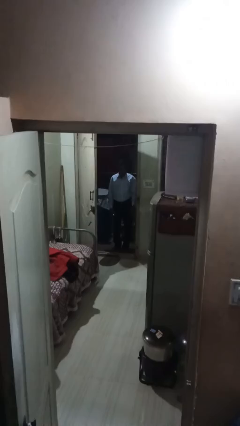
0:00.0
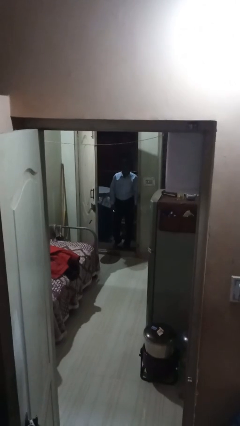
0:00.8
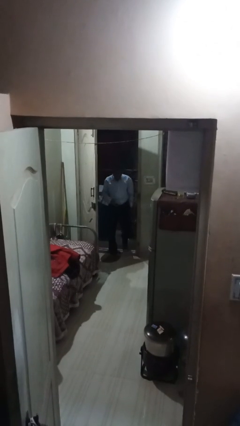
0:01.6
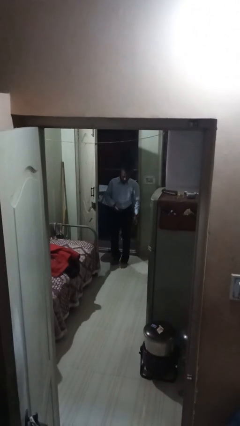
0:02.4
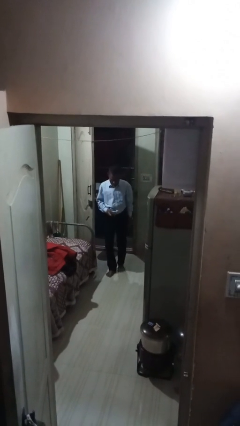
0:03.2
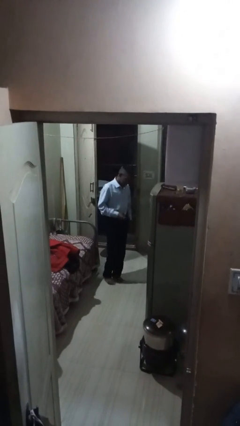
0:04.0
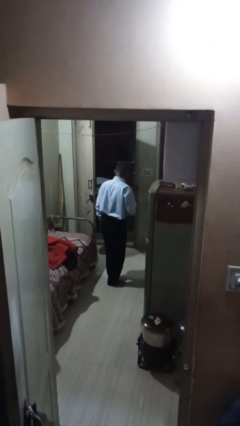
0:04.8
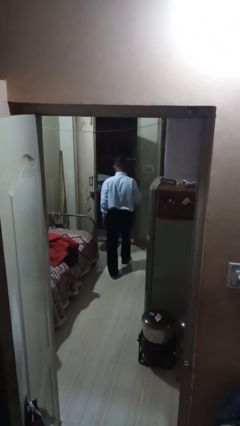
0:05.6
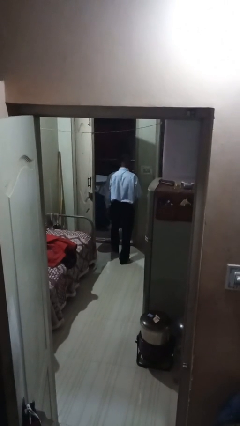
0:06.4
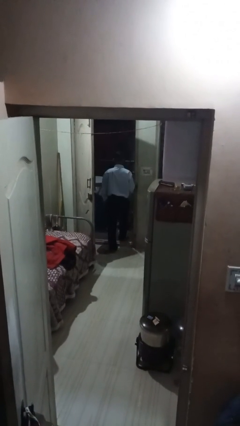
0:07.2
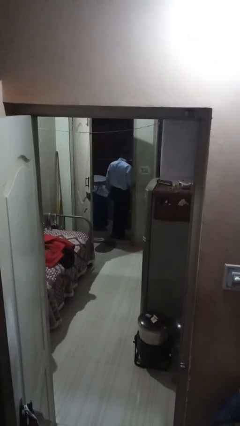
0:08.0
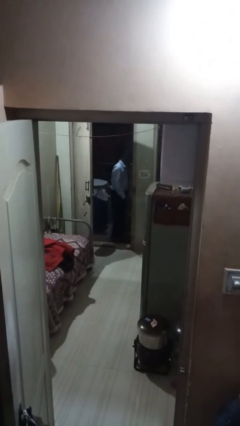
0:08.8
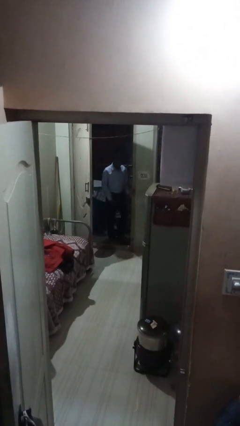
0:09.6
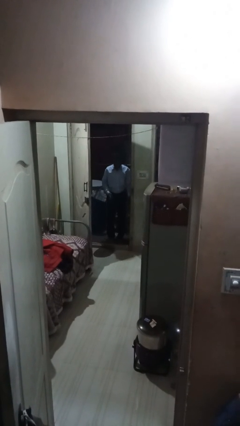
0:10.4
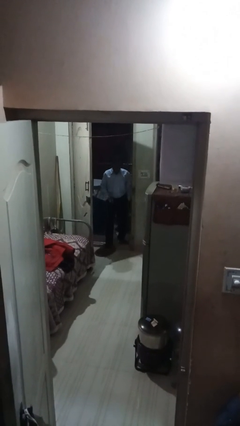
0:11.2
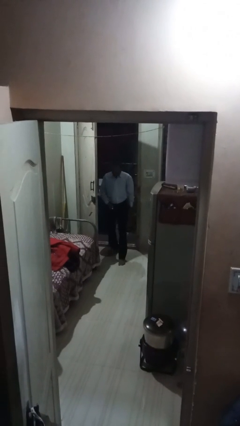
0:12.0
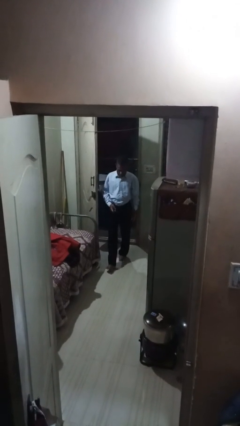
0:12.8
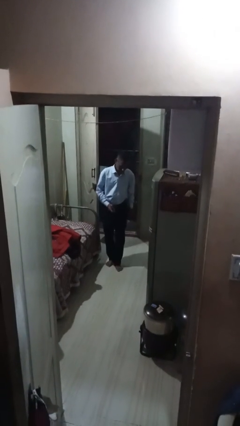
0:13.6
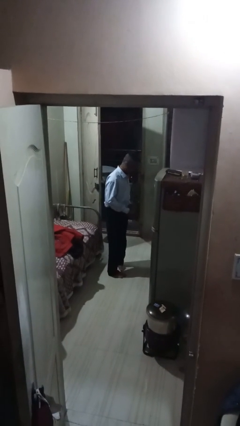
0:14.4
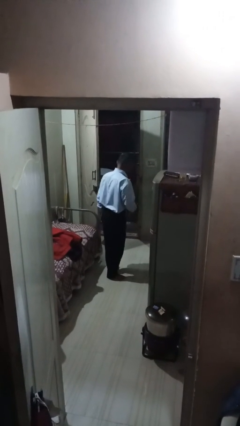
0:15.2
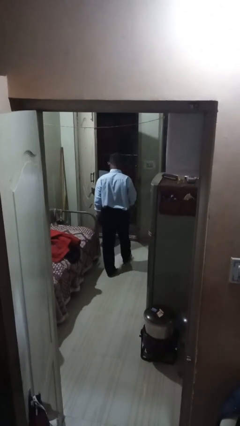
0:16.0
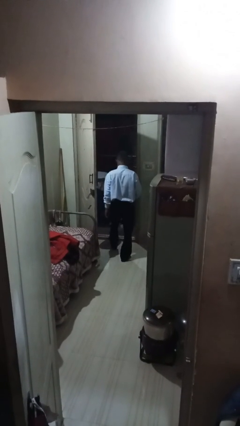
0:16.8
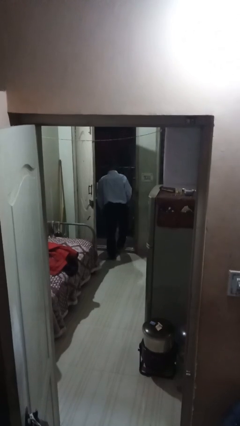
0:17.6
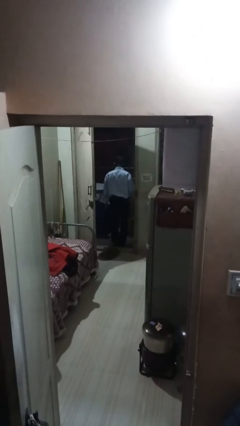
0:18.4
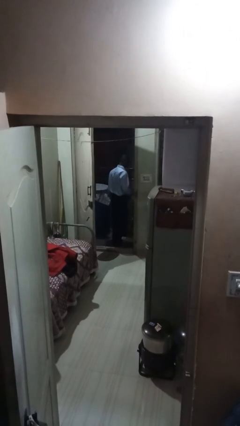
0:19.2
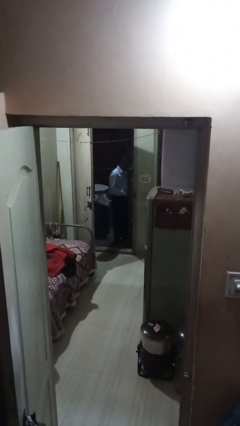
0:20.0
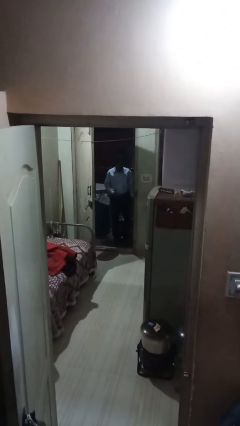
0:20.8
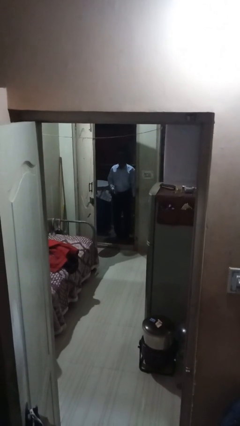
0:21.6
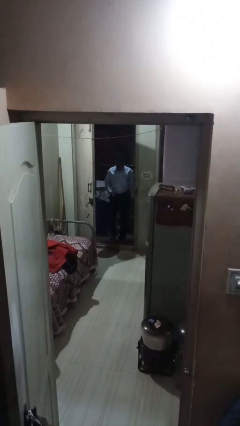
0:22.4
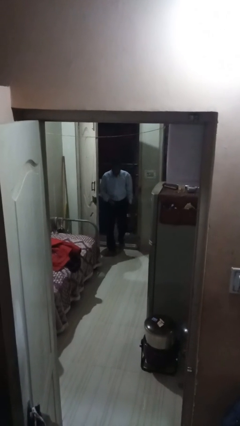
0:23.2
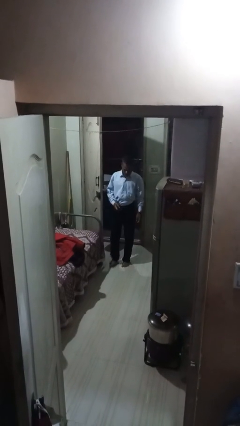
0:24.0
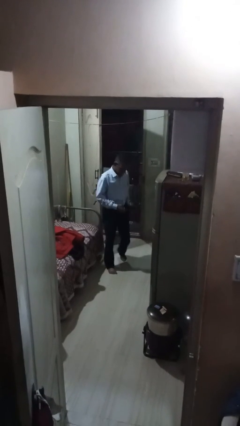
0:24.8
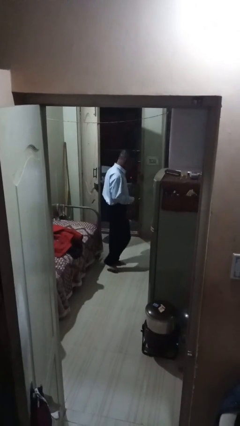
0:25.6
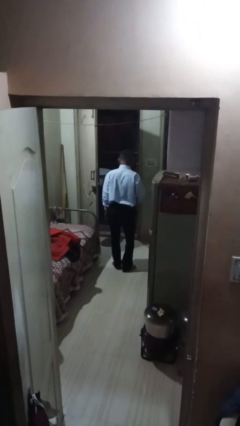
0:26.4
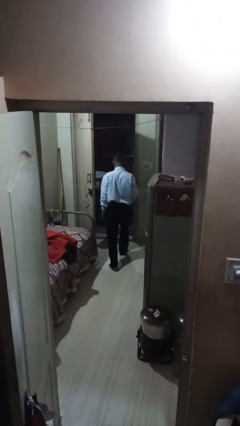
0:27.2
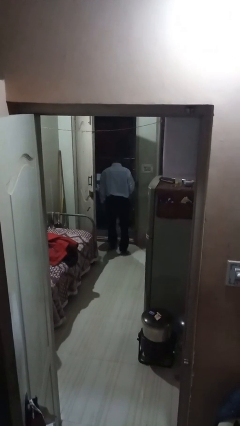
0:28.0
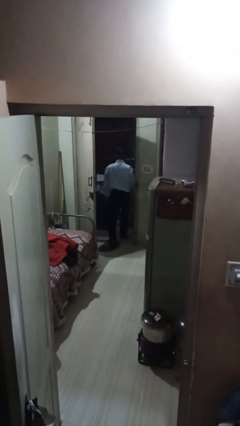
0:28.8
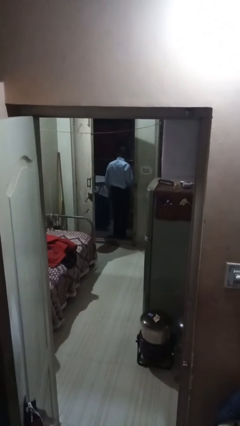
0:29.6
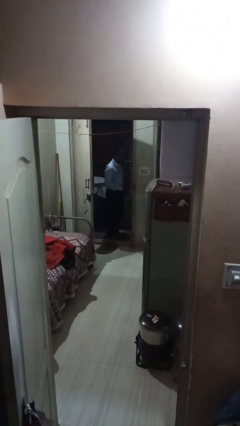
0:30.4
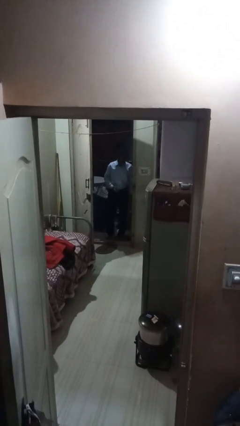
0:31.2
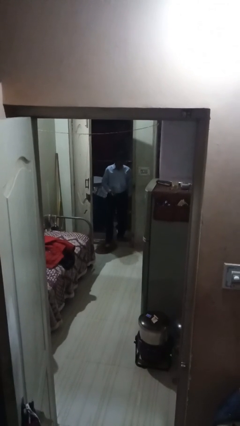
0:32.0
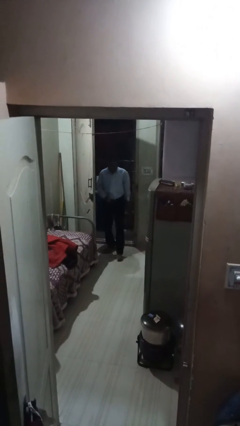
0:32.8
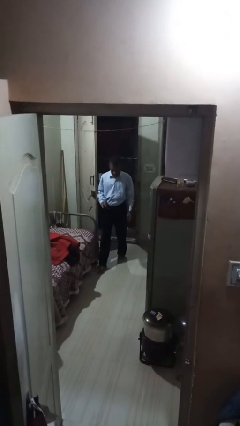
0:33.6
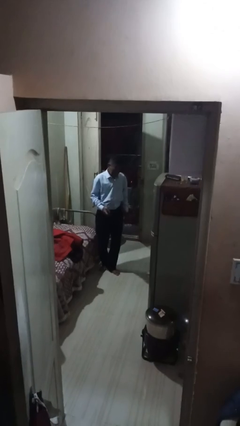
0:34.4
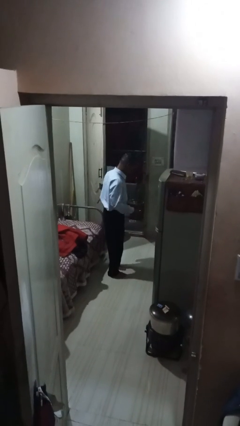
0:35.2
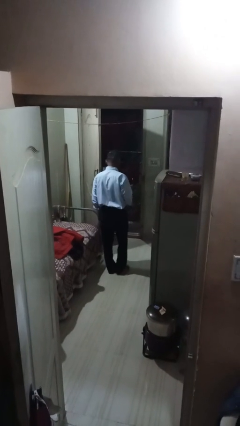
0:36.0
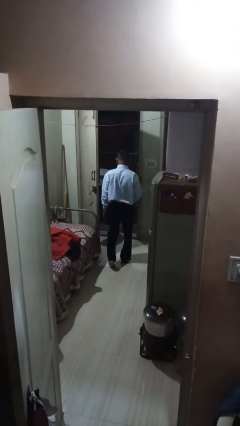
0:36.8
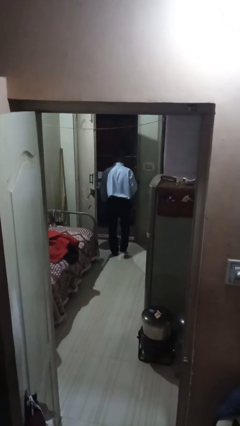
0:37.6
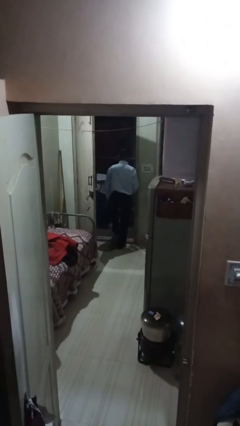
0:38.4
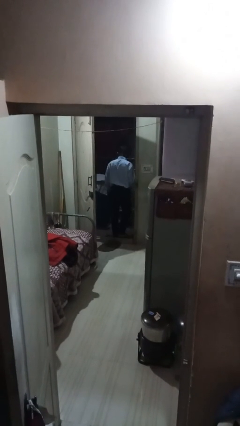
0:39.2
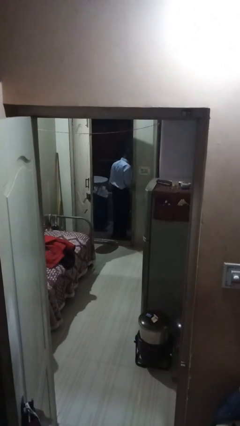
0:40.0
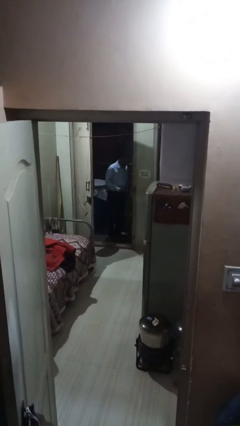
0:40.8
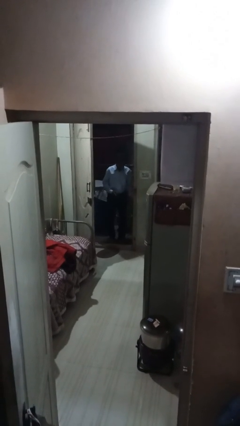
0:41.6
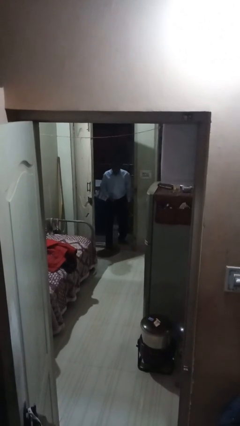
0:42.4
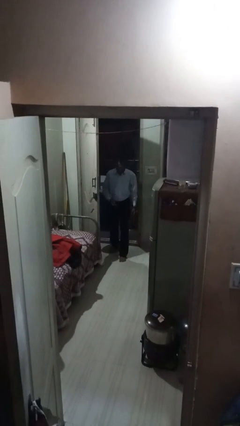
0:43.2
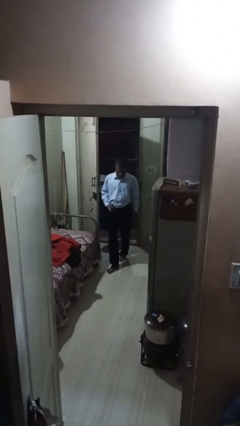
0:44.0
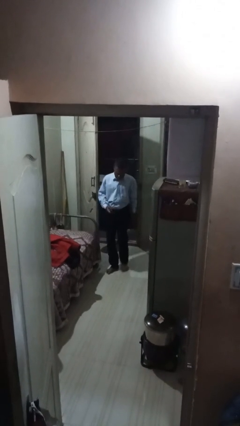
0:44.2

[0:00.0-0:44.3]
person texts on phone

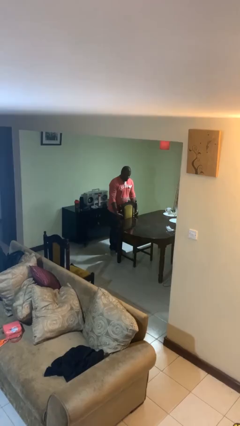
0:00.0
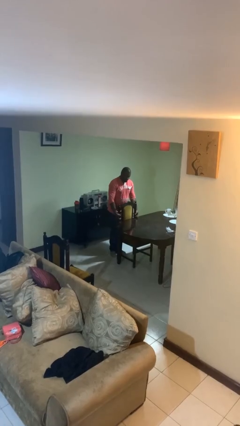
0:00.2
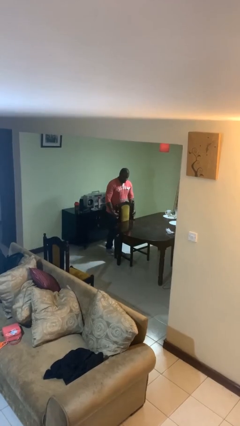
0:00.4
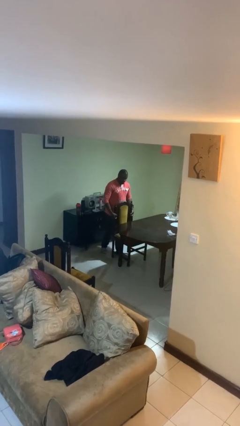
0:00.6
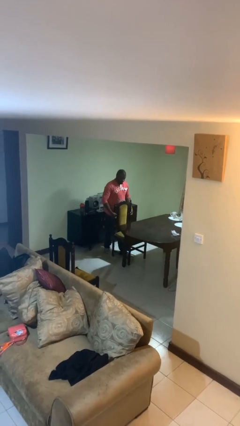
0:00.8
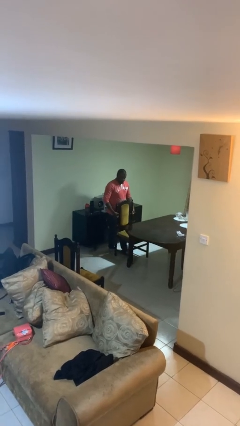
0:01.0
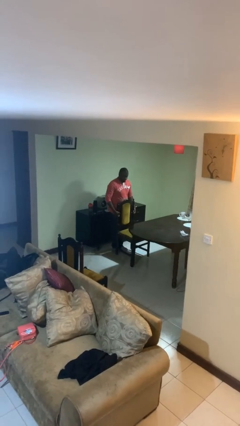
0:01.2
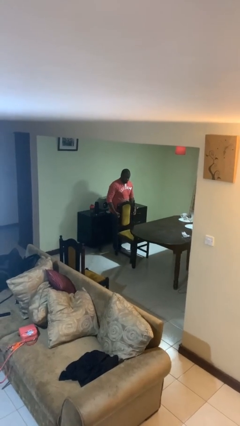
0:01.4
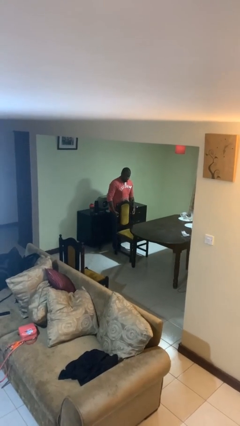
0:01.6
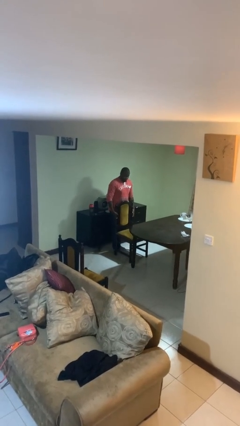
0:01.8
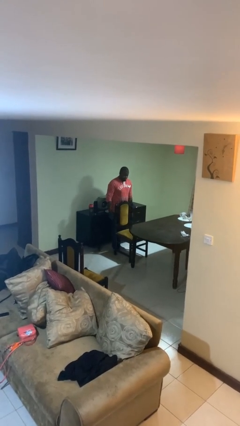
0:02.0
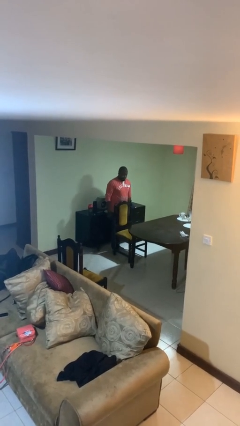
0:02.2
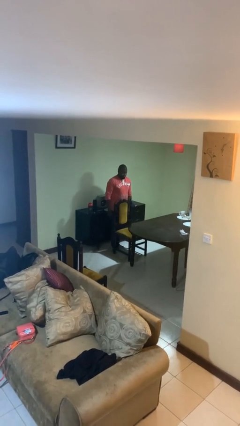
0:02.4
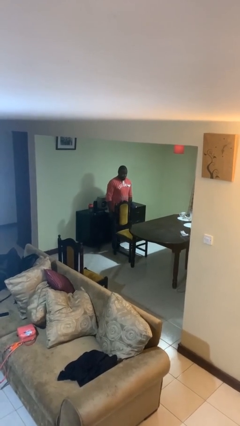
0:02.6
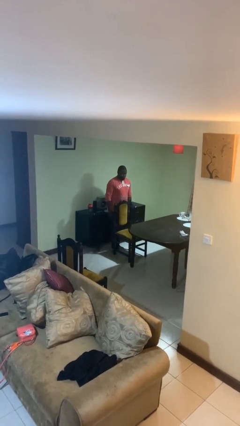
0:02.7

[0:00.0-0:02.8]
person pulls out chair

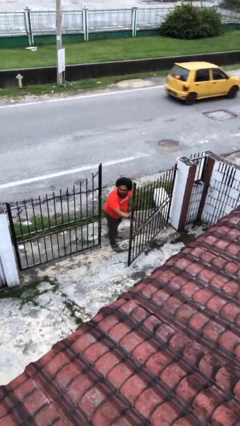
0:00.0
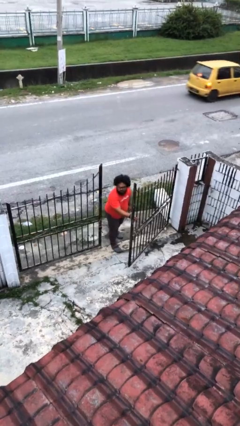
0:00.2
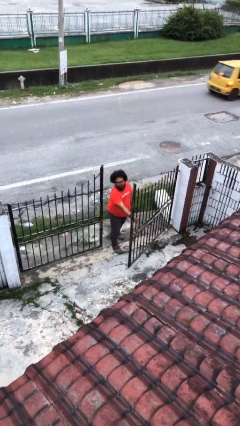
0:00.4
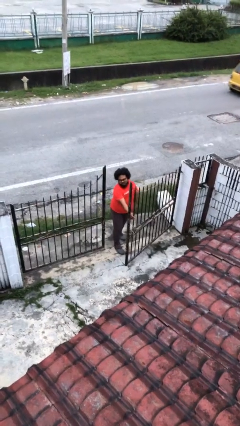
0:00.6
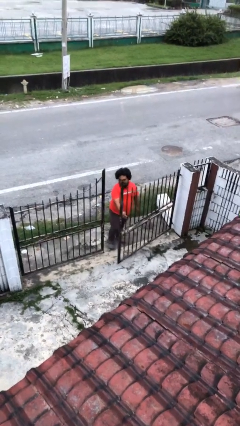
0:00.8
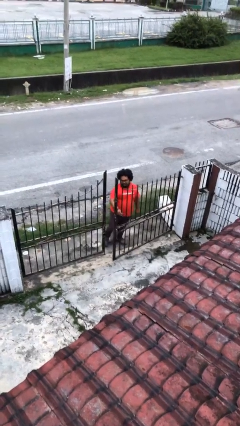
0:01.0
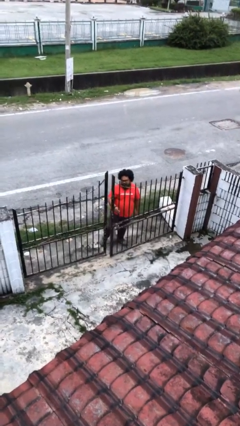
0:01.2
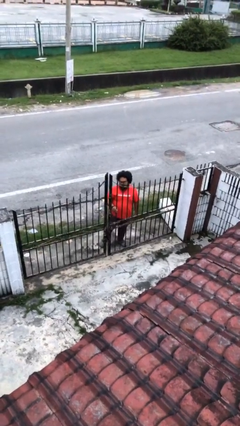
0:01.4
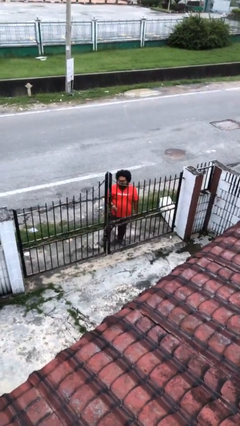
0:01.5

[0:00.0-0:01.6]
person closes facility door

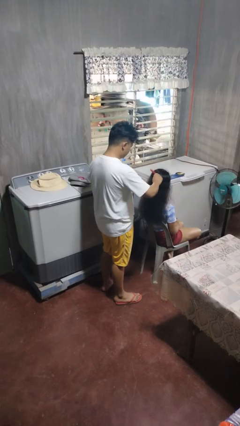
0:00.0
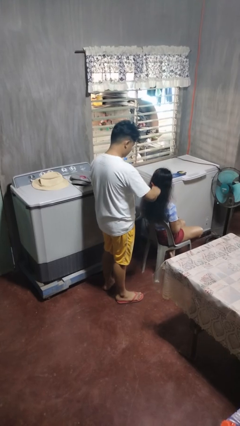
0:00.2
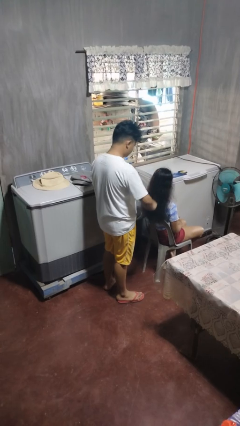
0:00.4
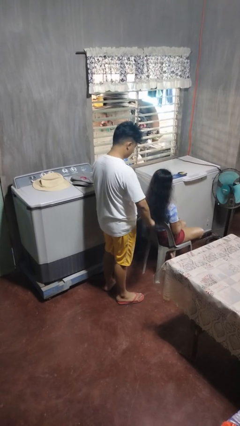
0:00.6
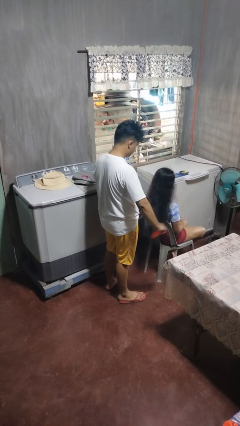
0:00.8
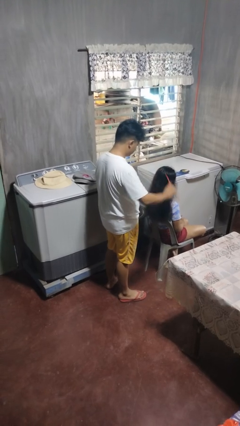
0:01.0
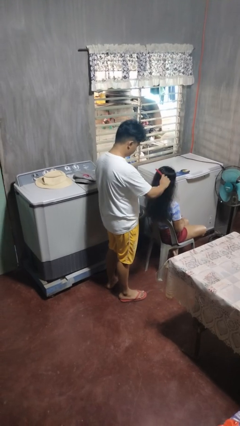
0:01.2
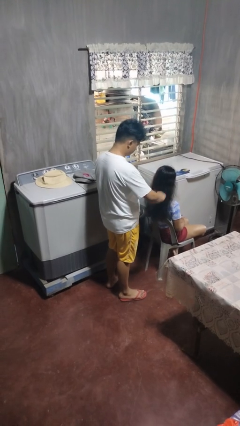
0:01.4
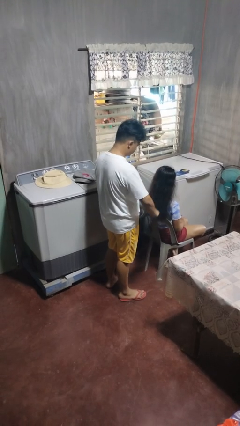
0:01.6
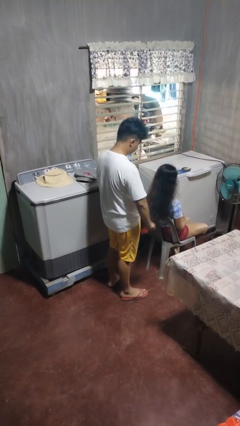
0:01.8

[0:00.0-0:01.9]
person brushes hair of person

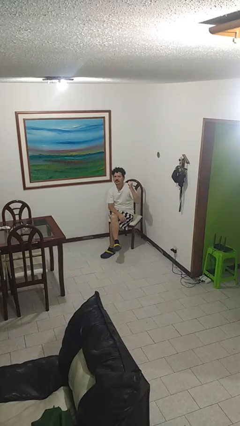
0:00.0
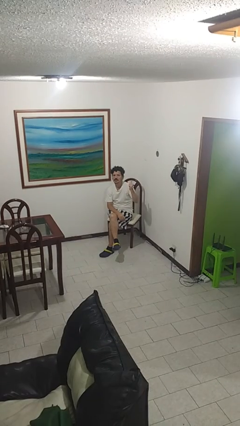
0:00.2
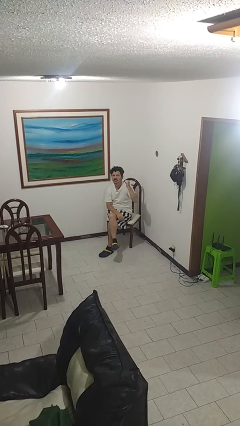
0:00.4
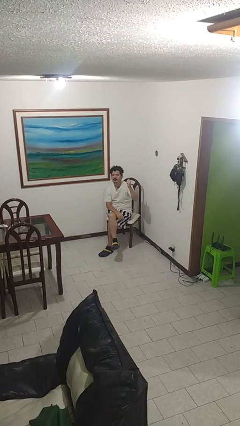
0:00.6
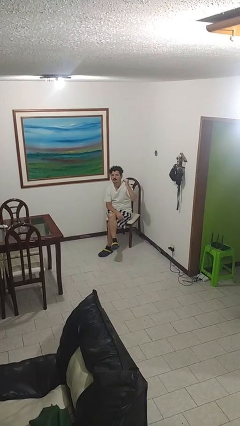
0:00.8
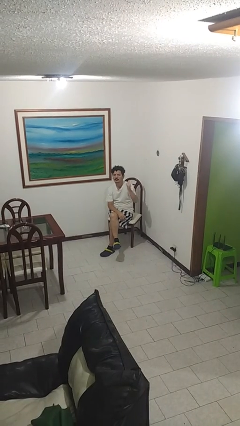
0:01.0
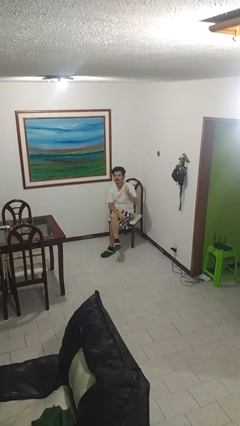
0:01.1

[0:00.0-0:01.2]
person gestures behind me
